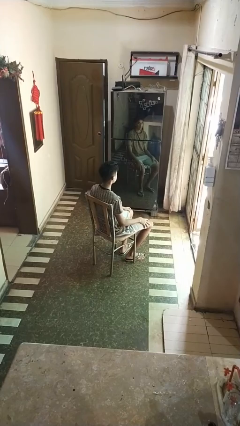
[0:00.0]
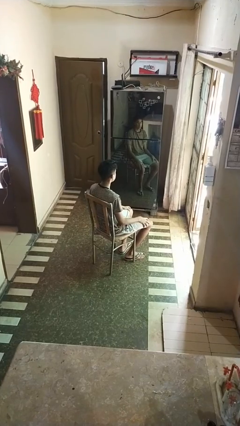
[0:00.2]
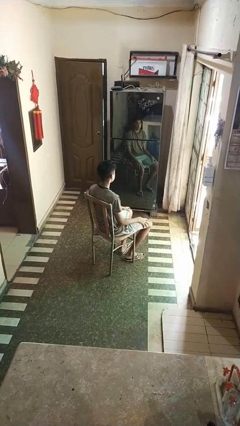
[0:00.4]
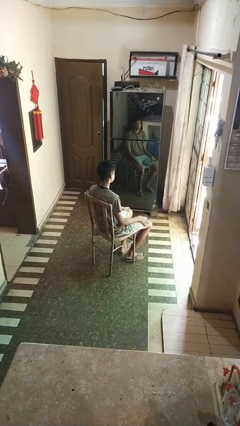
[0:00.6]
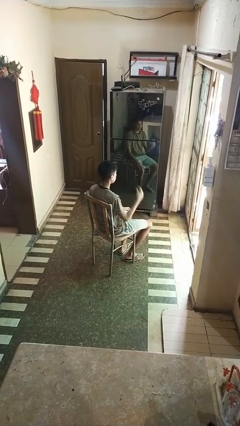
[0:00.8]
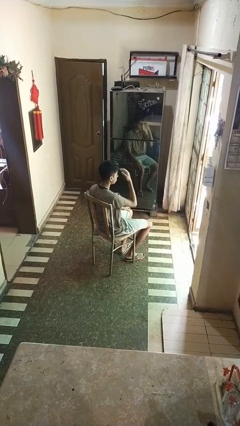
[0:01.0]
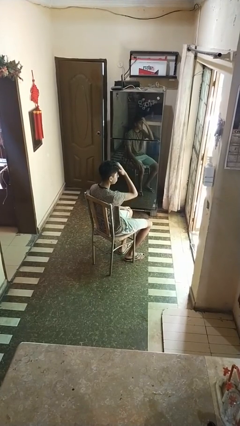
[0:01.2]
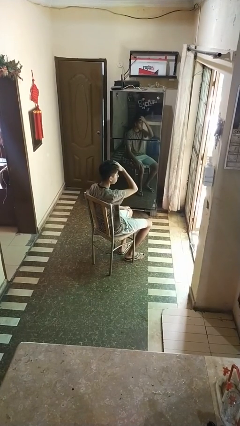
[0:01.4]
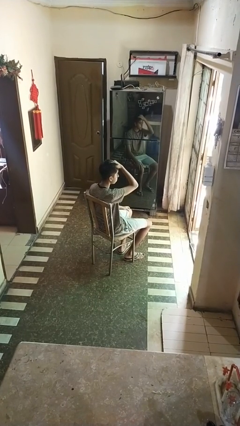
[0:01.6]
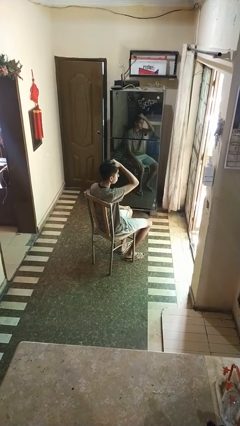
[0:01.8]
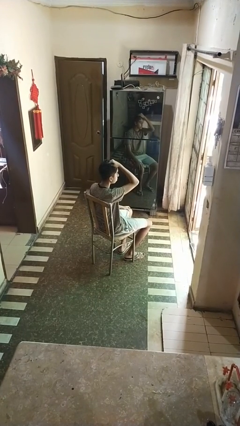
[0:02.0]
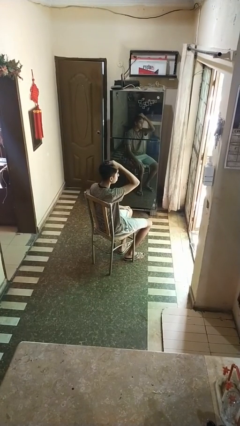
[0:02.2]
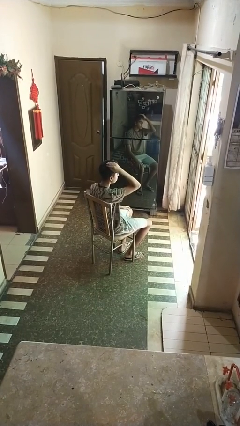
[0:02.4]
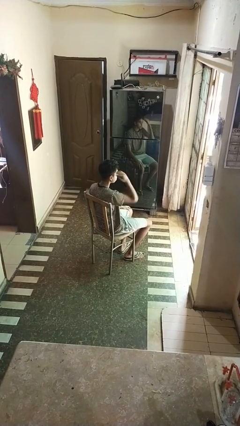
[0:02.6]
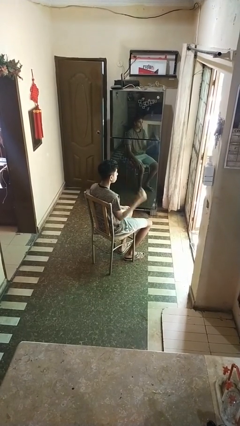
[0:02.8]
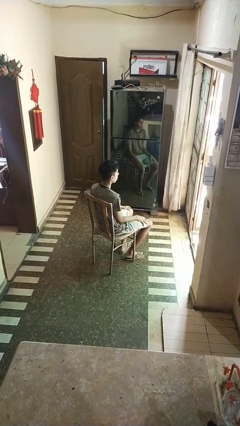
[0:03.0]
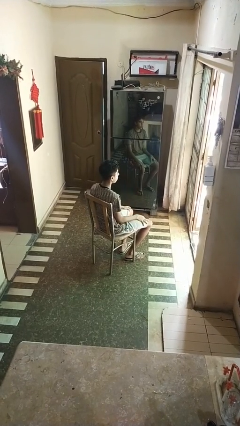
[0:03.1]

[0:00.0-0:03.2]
person strokes hair

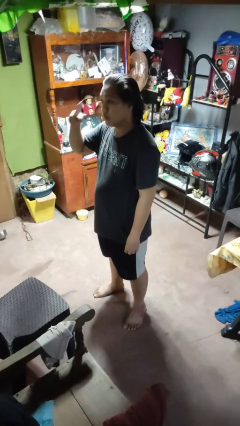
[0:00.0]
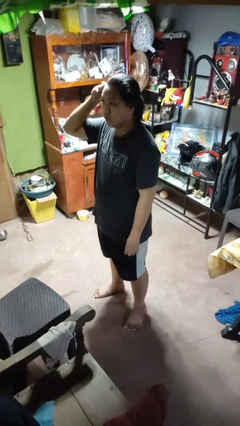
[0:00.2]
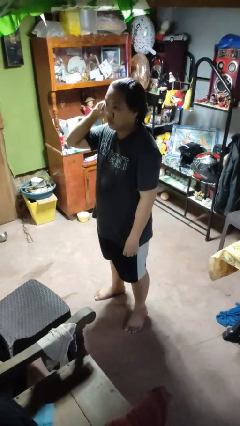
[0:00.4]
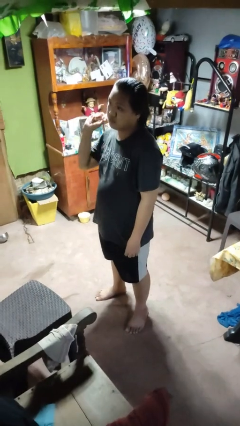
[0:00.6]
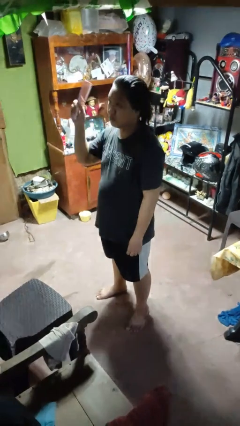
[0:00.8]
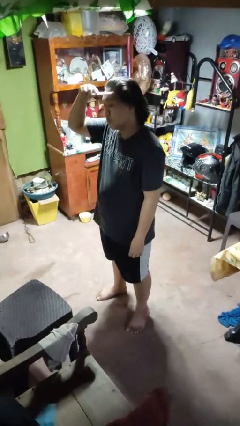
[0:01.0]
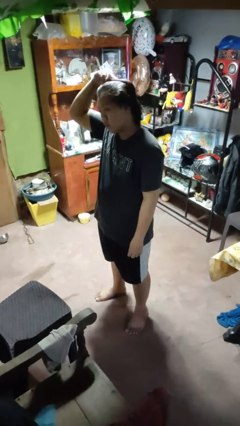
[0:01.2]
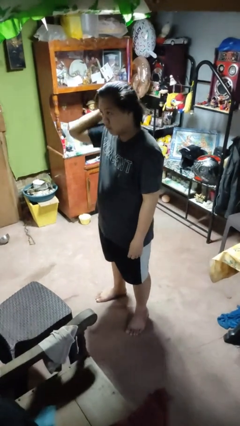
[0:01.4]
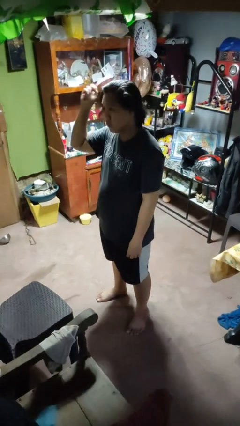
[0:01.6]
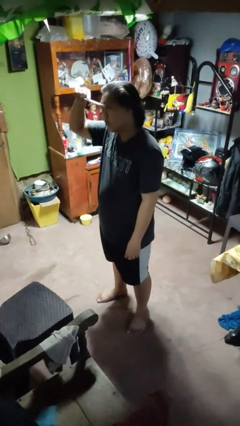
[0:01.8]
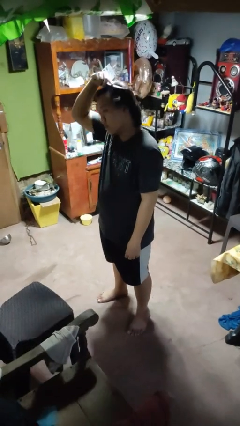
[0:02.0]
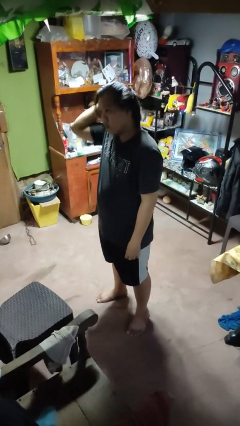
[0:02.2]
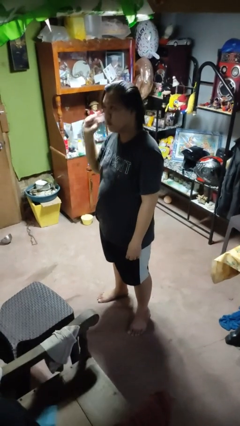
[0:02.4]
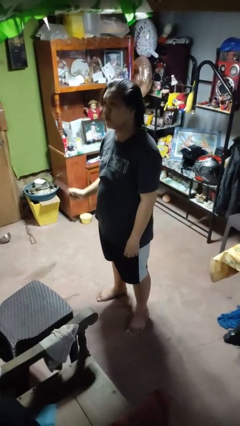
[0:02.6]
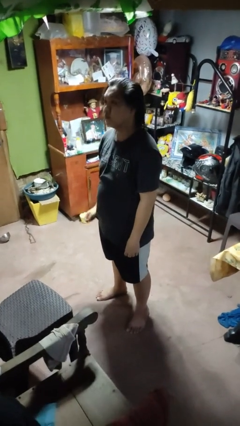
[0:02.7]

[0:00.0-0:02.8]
person brushes hair

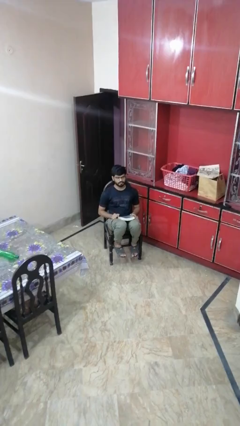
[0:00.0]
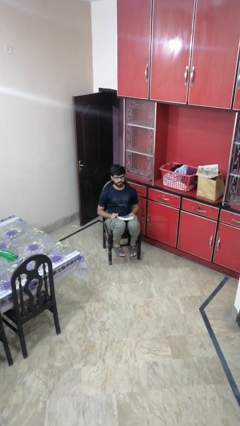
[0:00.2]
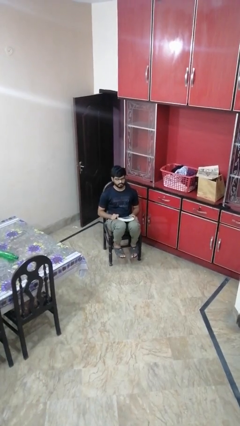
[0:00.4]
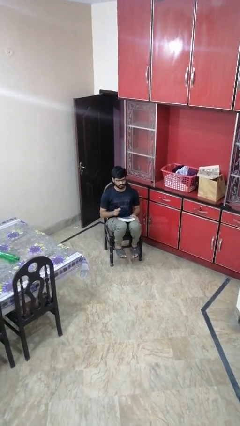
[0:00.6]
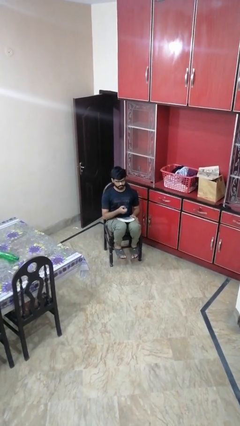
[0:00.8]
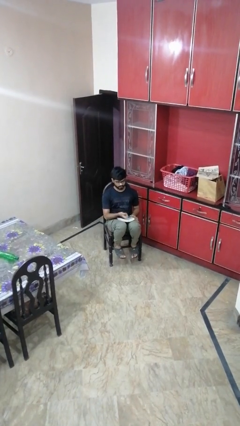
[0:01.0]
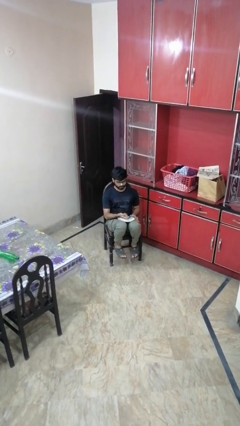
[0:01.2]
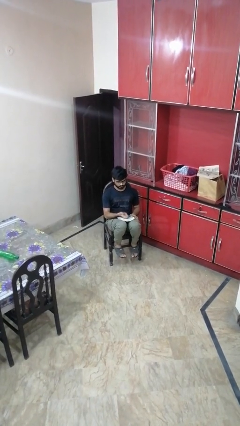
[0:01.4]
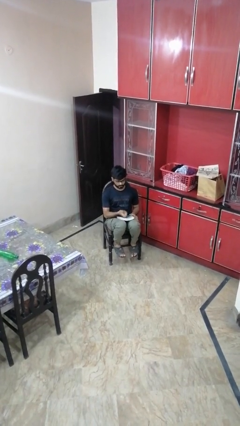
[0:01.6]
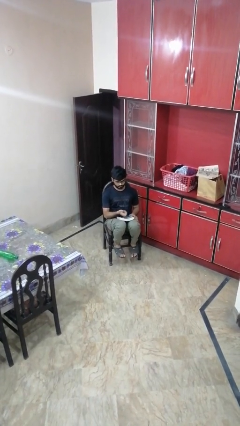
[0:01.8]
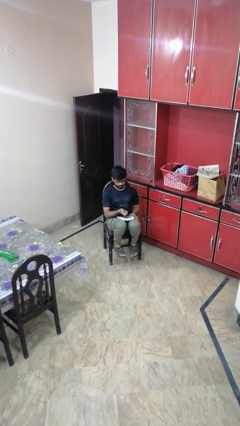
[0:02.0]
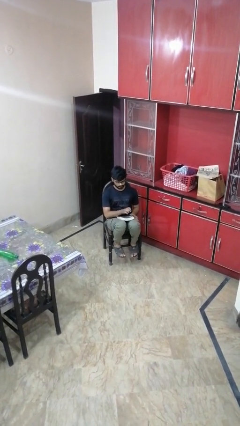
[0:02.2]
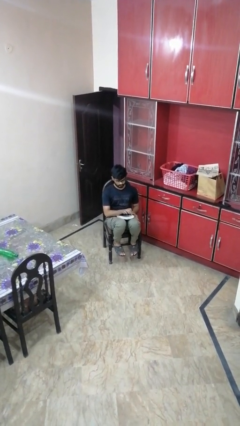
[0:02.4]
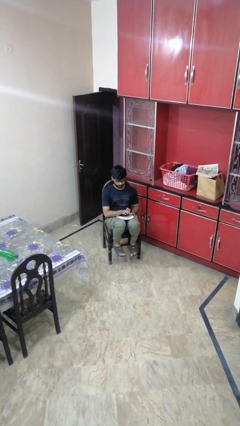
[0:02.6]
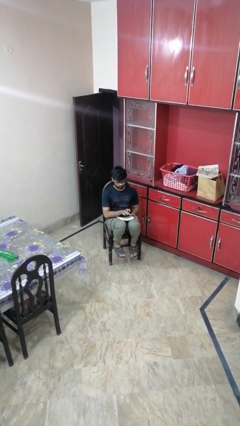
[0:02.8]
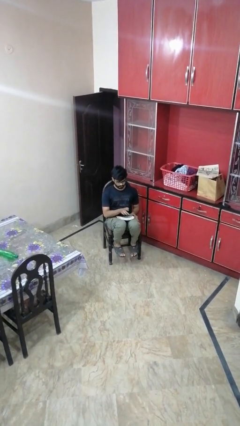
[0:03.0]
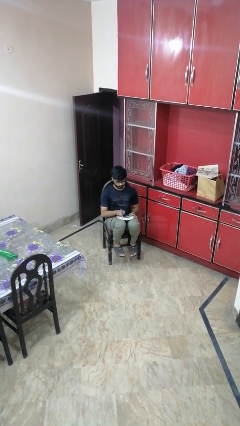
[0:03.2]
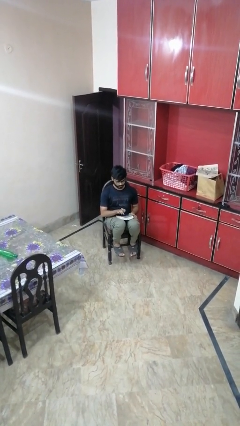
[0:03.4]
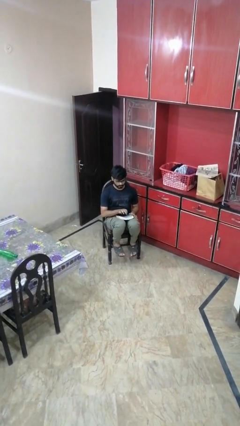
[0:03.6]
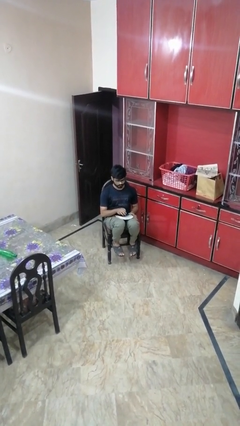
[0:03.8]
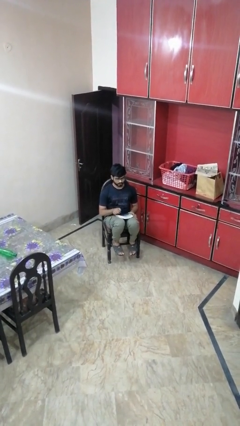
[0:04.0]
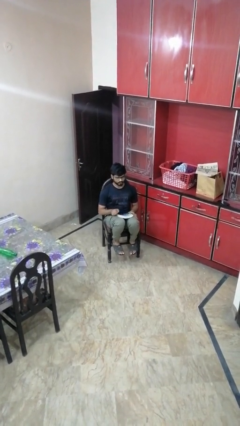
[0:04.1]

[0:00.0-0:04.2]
person taps object with finger

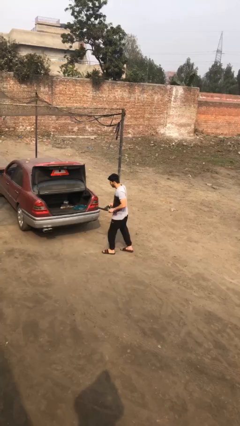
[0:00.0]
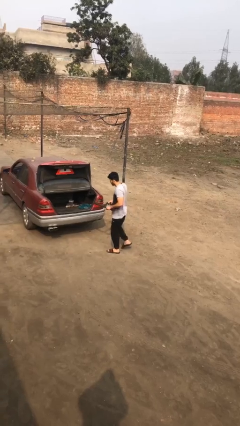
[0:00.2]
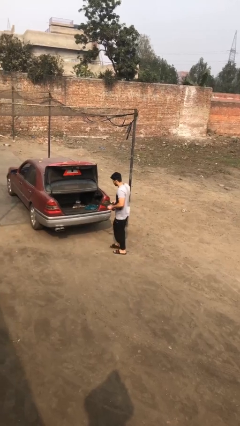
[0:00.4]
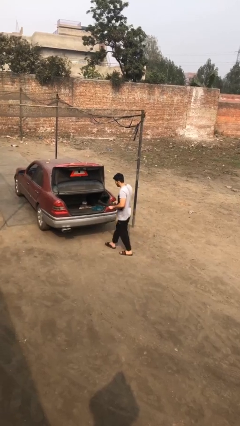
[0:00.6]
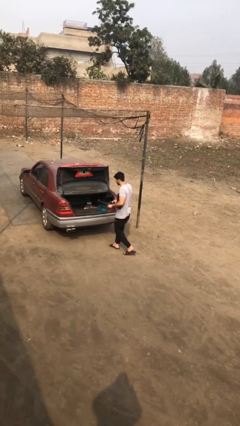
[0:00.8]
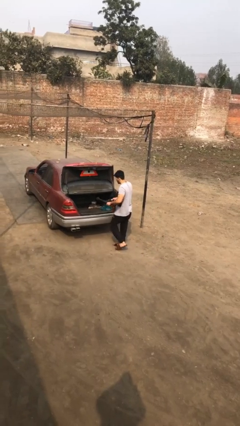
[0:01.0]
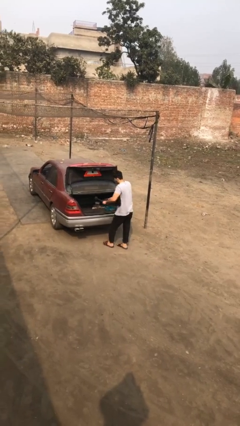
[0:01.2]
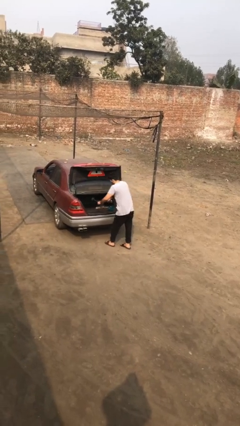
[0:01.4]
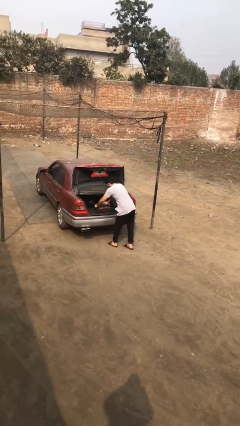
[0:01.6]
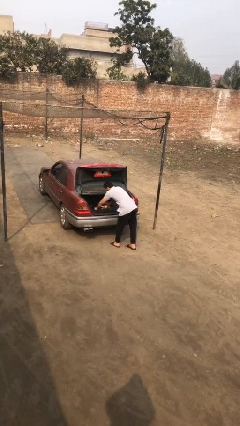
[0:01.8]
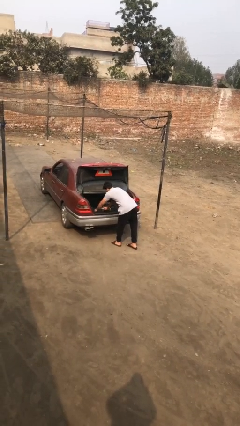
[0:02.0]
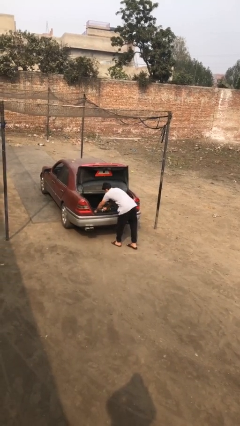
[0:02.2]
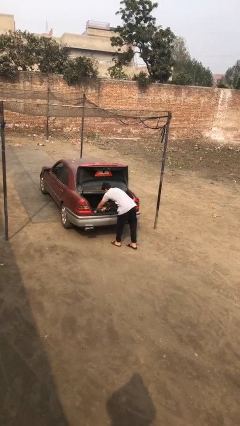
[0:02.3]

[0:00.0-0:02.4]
person loads car

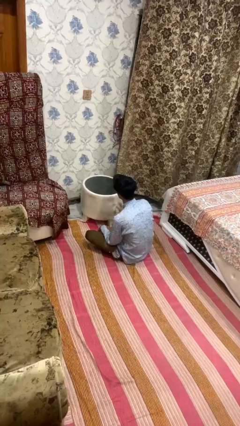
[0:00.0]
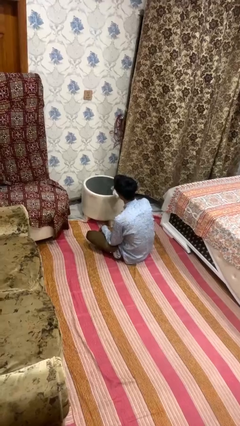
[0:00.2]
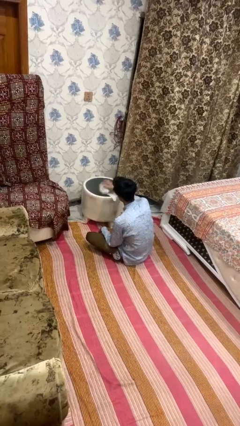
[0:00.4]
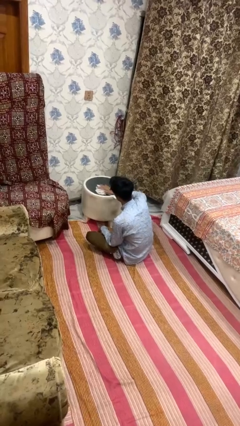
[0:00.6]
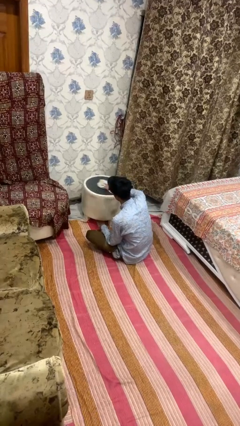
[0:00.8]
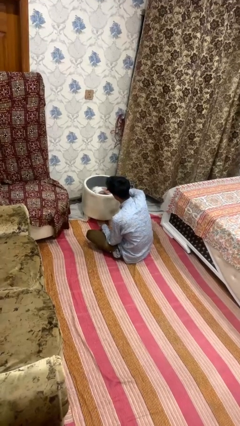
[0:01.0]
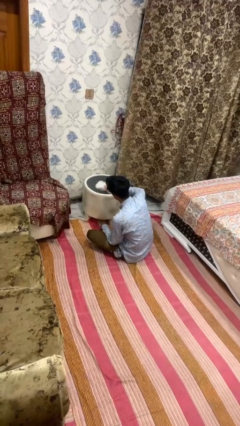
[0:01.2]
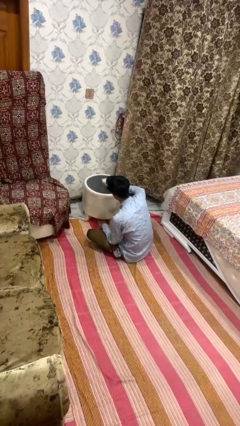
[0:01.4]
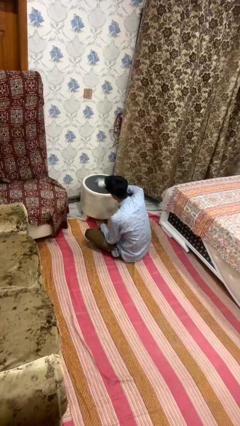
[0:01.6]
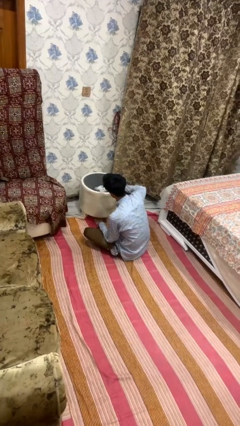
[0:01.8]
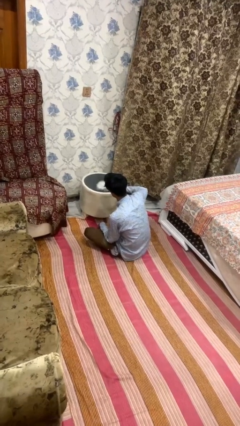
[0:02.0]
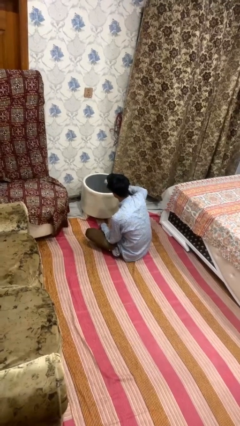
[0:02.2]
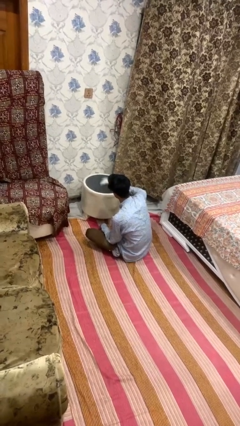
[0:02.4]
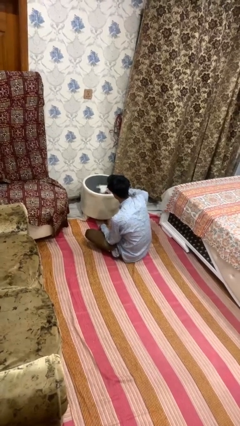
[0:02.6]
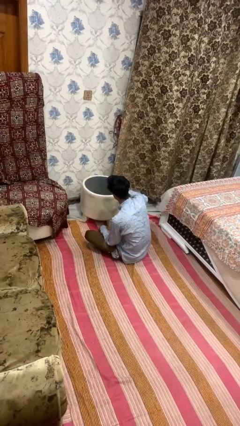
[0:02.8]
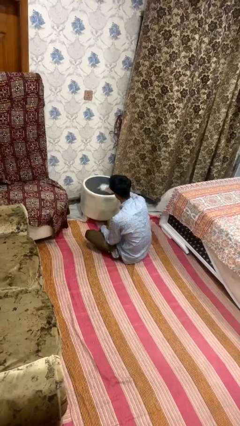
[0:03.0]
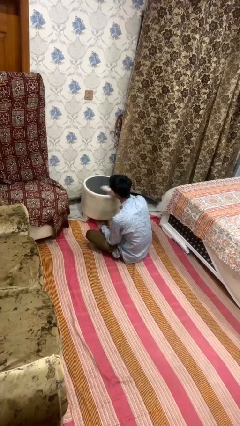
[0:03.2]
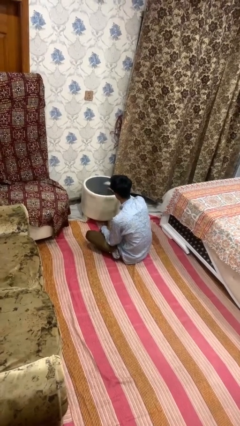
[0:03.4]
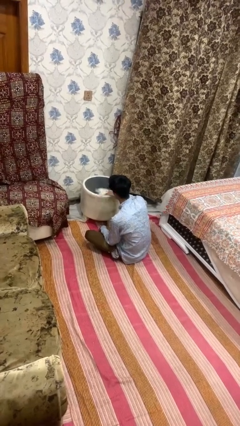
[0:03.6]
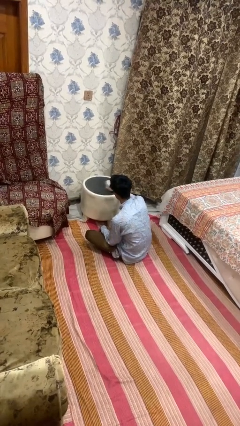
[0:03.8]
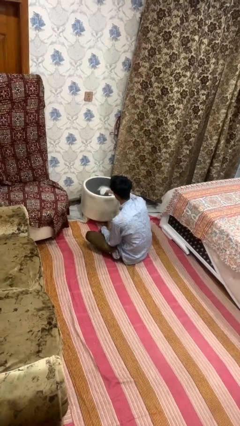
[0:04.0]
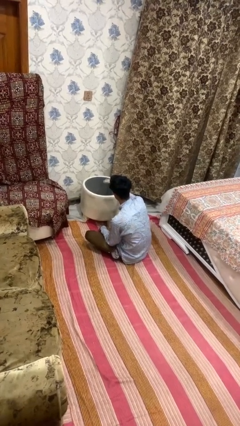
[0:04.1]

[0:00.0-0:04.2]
person cleans table with rag

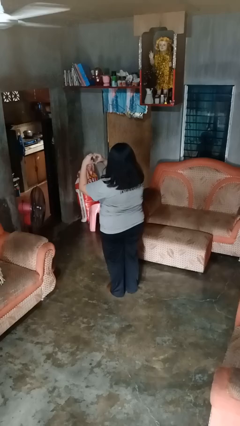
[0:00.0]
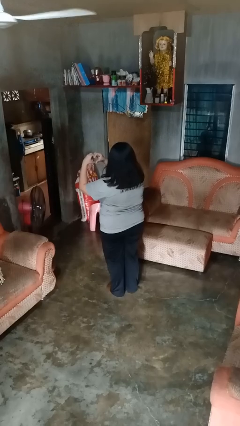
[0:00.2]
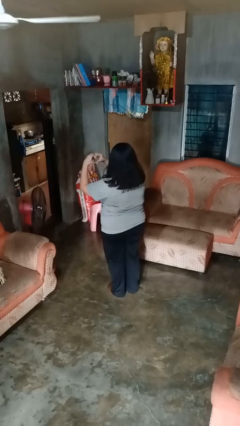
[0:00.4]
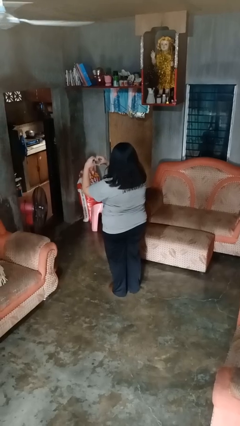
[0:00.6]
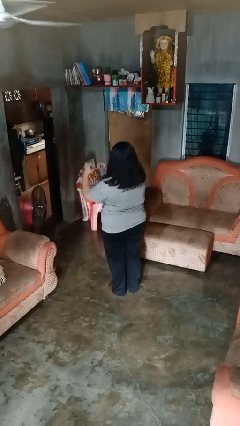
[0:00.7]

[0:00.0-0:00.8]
person gestures heart
